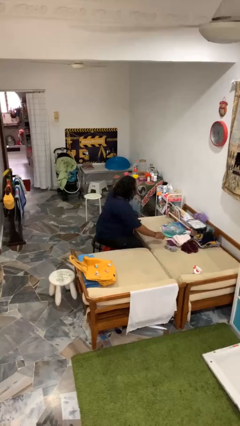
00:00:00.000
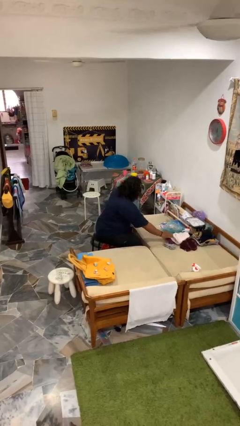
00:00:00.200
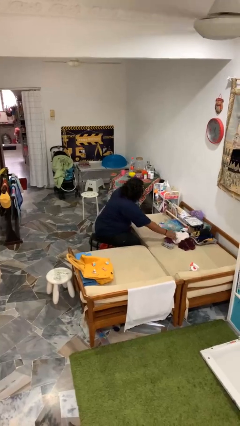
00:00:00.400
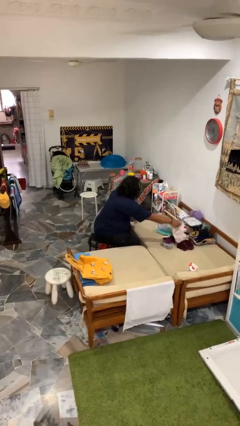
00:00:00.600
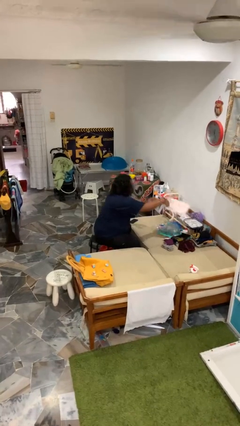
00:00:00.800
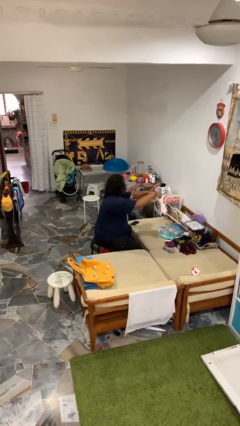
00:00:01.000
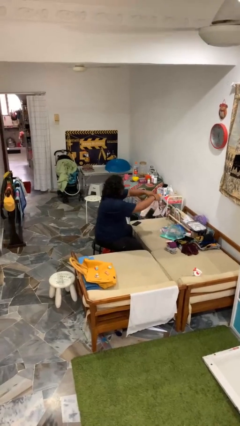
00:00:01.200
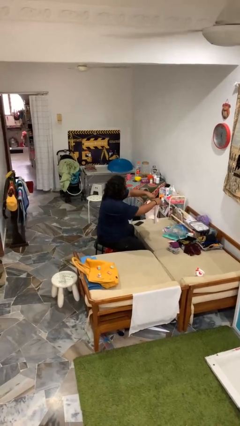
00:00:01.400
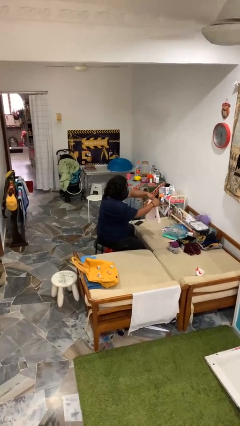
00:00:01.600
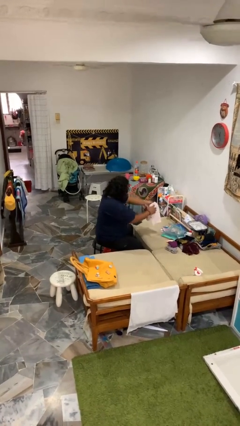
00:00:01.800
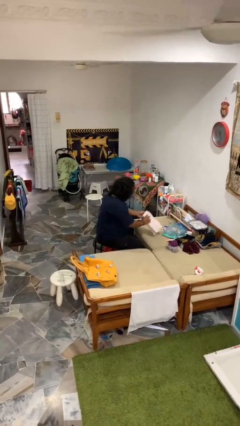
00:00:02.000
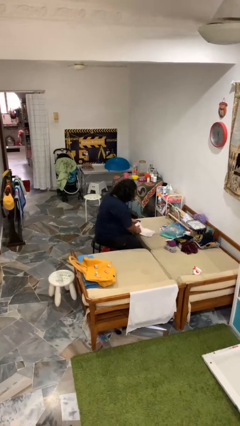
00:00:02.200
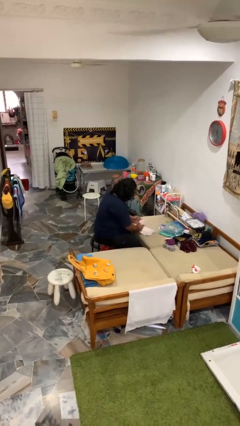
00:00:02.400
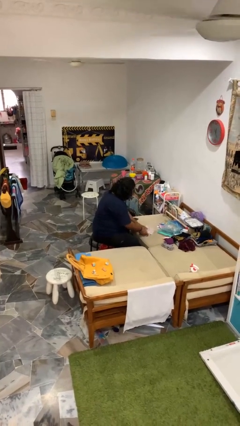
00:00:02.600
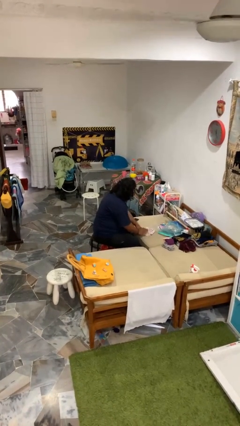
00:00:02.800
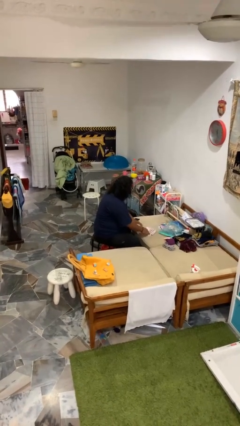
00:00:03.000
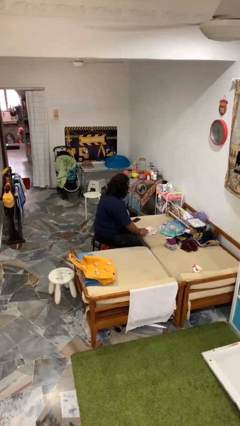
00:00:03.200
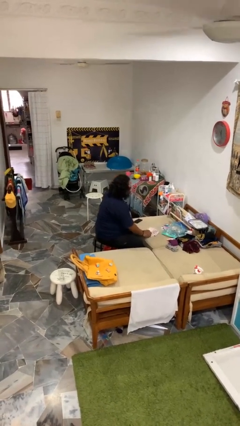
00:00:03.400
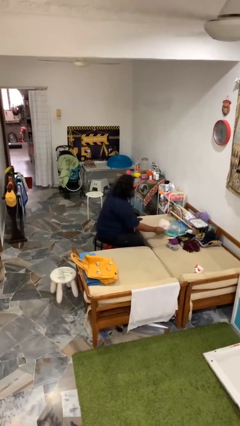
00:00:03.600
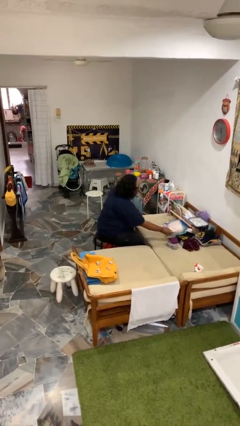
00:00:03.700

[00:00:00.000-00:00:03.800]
person folds pants

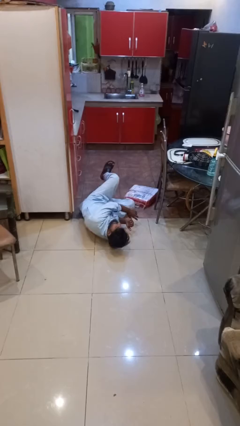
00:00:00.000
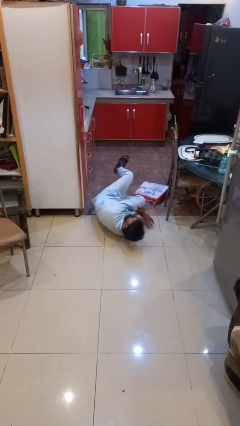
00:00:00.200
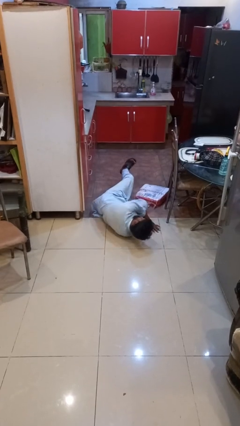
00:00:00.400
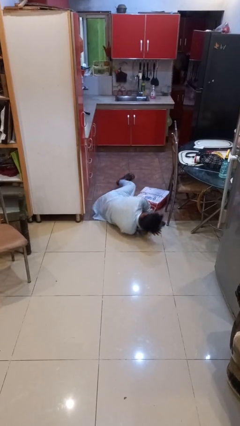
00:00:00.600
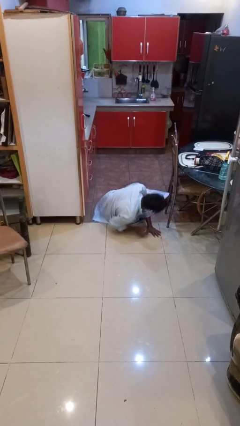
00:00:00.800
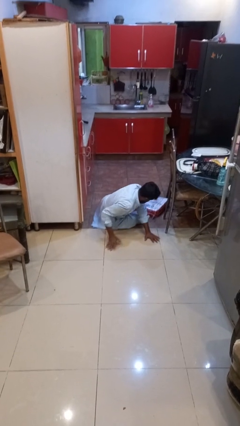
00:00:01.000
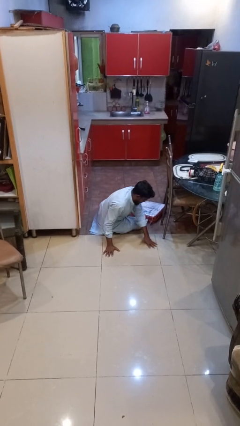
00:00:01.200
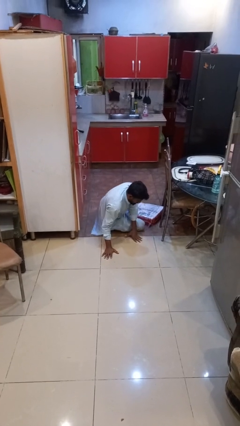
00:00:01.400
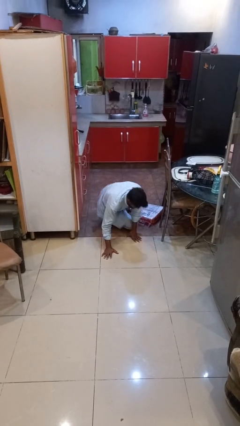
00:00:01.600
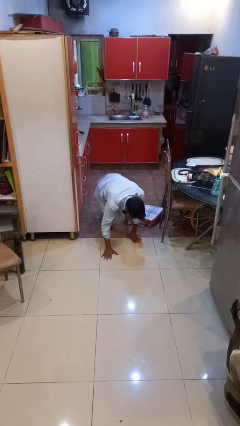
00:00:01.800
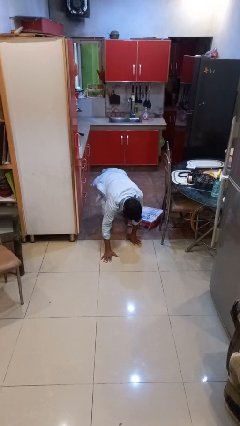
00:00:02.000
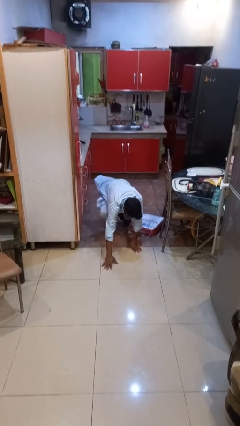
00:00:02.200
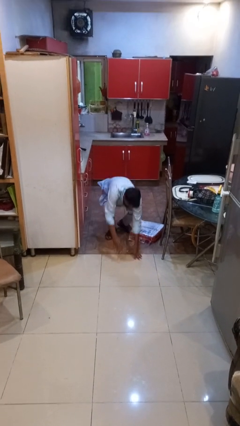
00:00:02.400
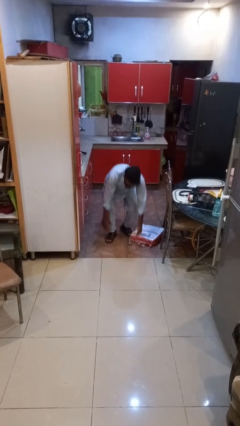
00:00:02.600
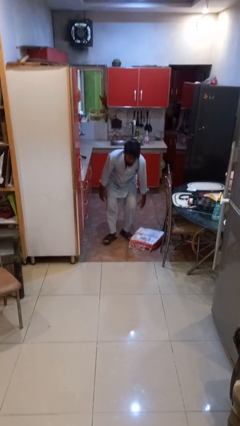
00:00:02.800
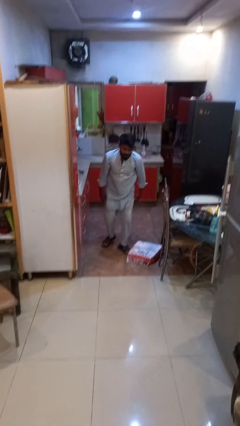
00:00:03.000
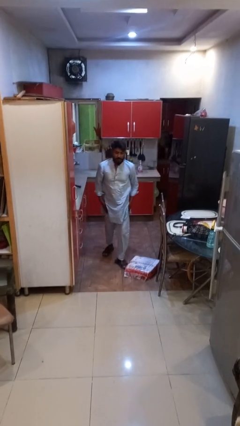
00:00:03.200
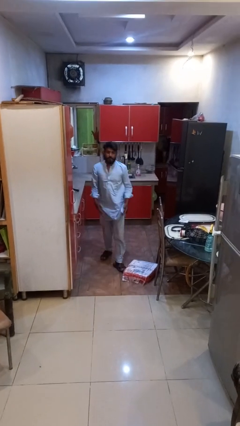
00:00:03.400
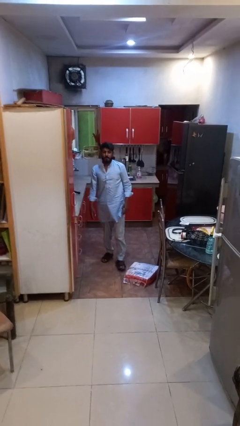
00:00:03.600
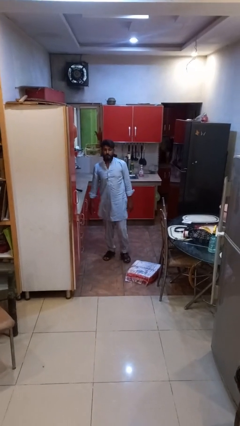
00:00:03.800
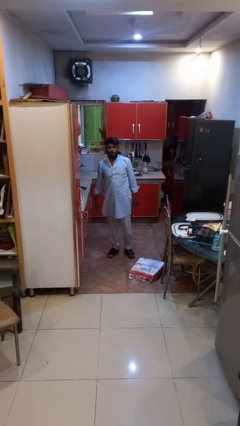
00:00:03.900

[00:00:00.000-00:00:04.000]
person stands up from floor

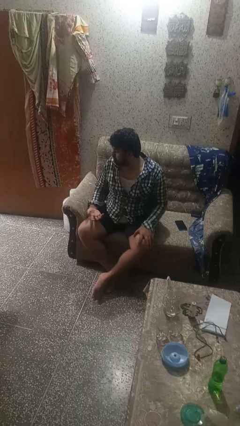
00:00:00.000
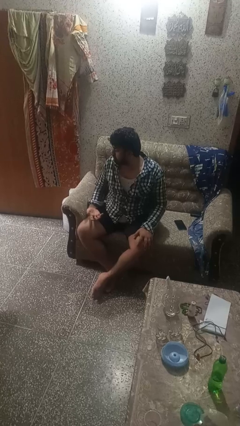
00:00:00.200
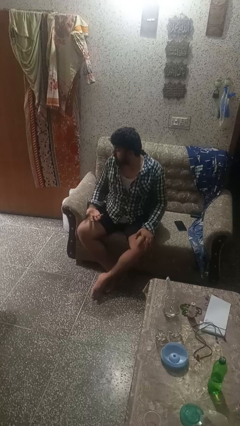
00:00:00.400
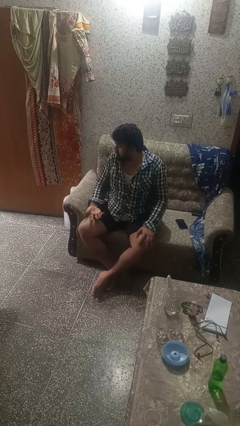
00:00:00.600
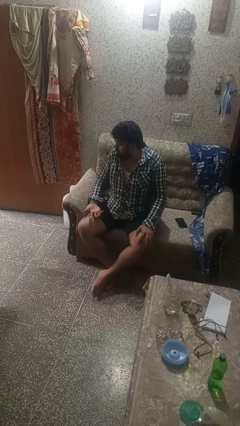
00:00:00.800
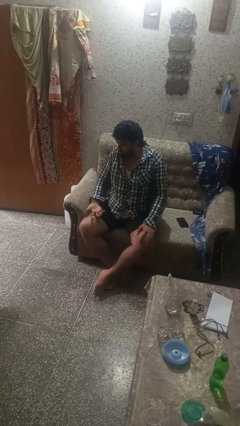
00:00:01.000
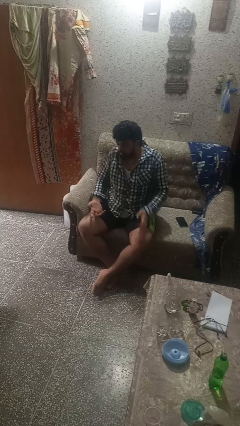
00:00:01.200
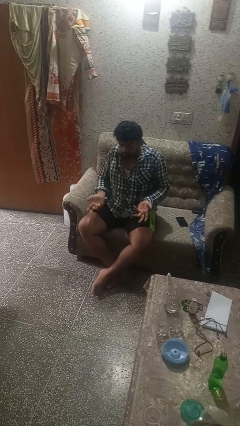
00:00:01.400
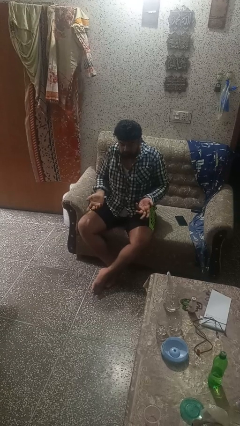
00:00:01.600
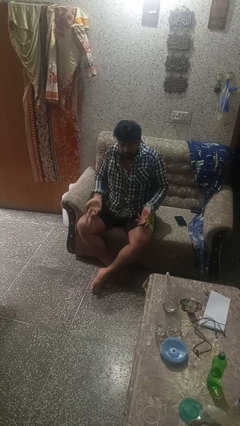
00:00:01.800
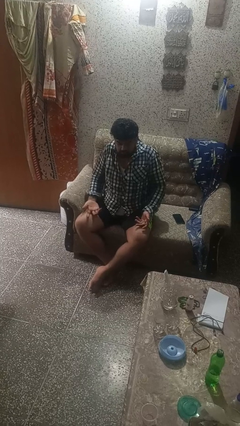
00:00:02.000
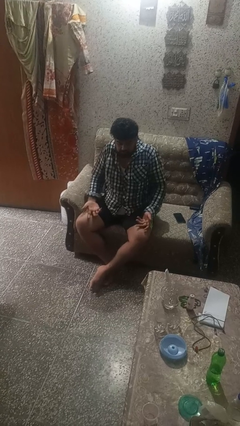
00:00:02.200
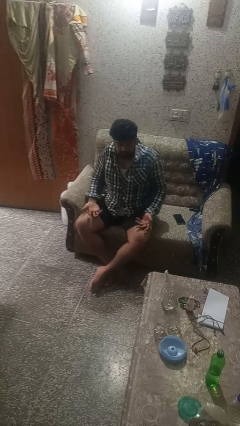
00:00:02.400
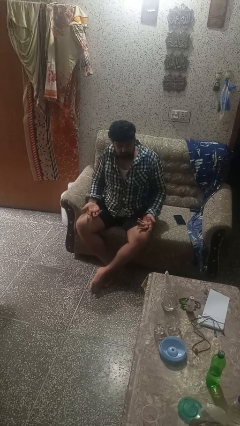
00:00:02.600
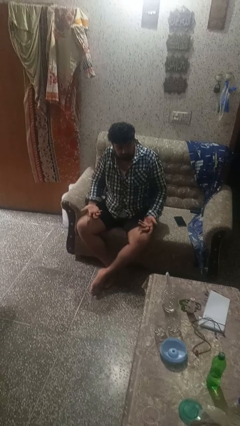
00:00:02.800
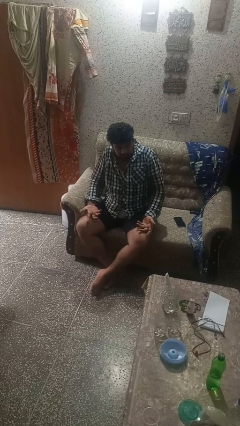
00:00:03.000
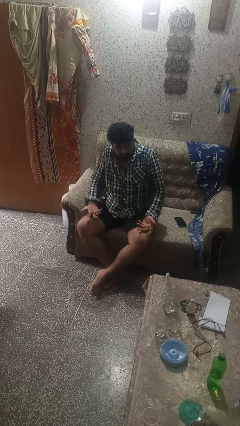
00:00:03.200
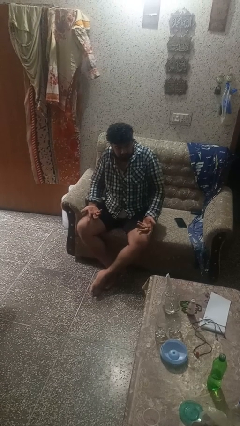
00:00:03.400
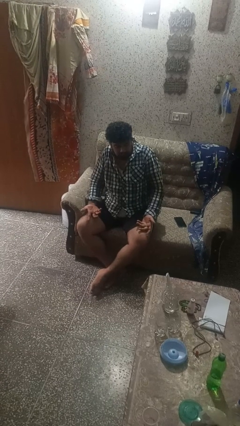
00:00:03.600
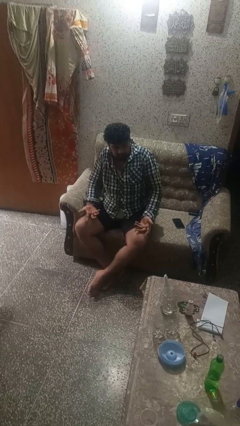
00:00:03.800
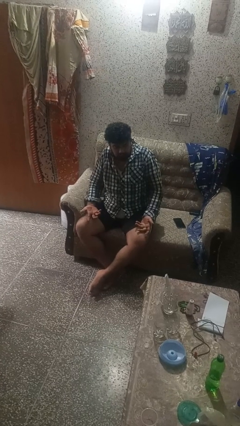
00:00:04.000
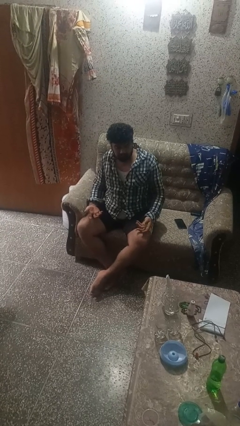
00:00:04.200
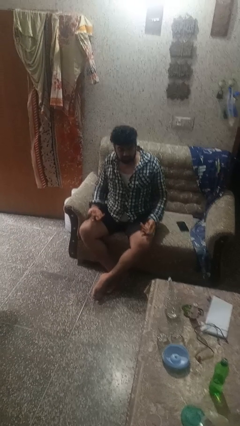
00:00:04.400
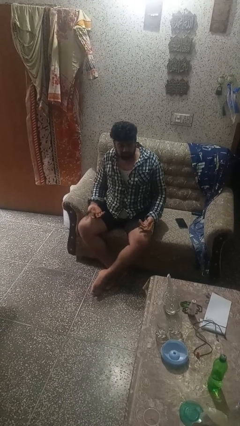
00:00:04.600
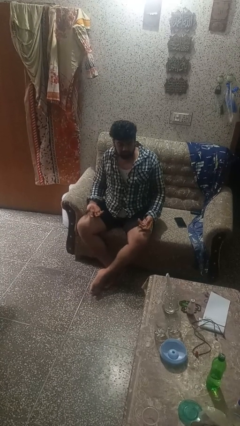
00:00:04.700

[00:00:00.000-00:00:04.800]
person shrugs

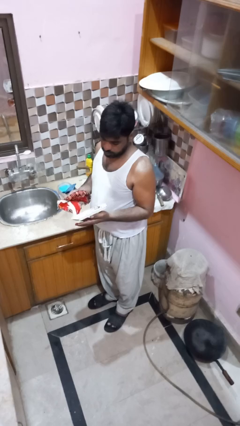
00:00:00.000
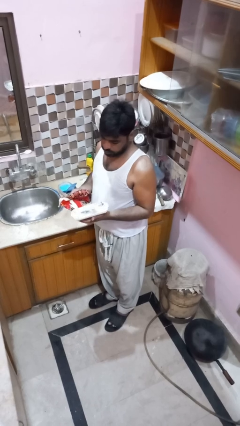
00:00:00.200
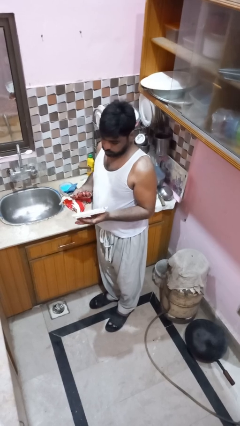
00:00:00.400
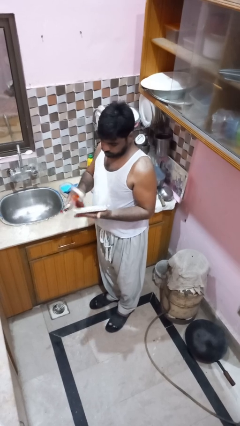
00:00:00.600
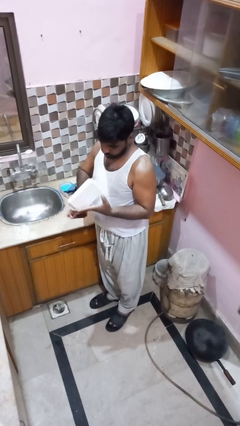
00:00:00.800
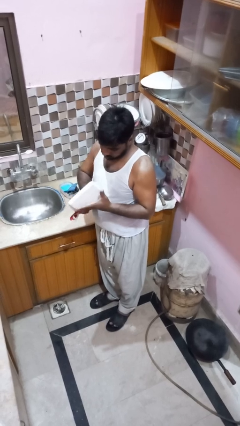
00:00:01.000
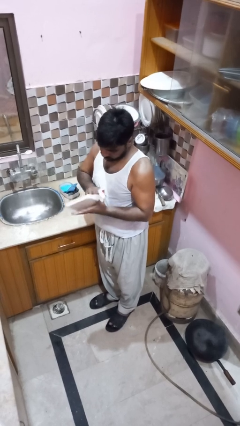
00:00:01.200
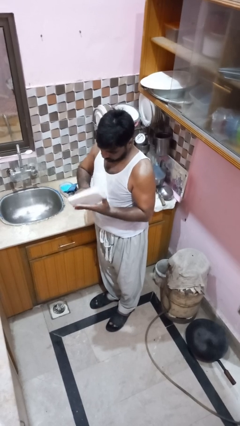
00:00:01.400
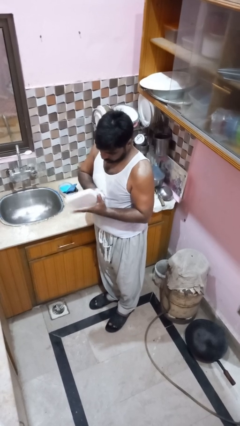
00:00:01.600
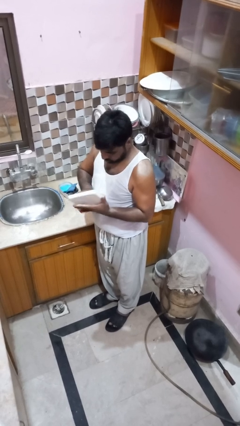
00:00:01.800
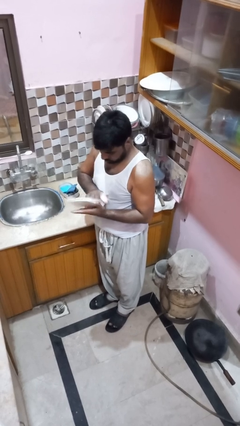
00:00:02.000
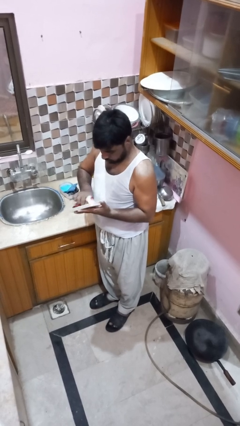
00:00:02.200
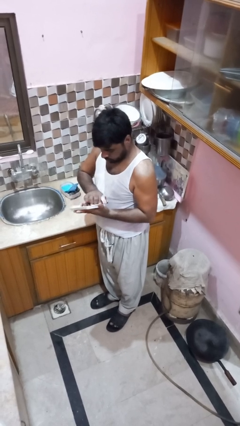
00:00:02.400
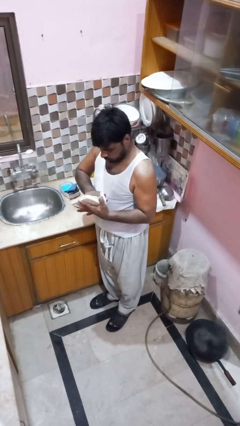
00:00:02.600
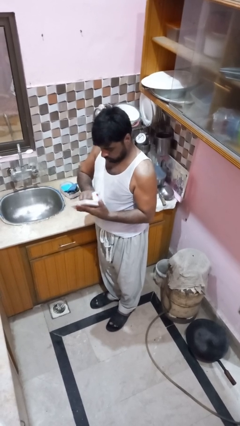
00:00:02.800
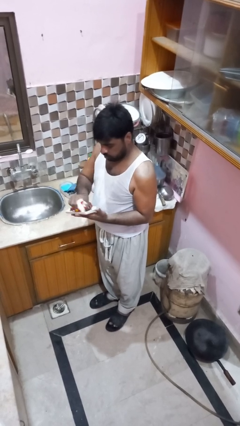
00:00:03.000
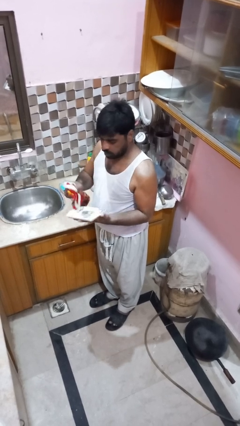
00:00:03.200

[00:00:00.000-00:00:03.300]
person dries dish

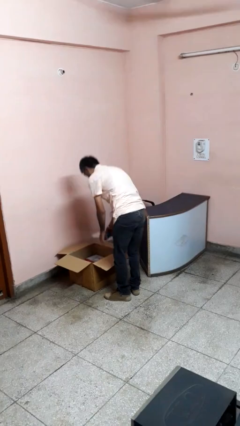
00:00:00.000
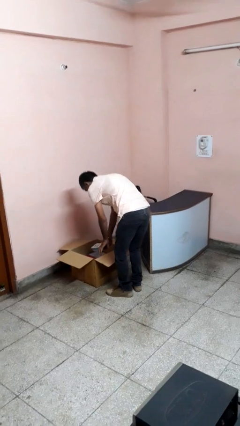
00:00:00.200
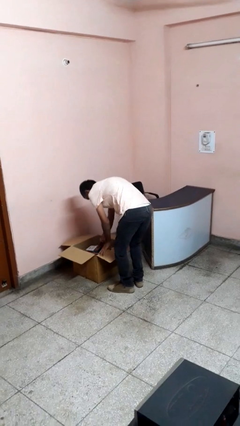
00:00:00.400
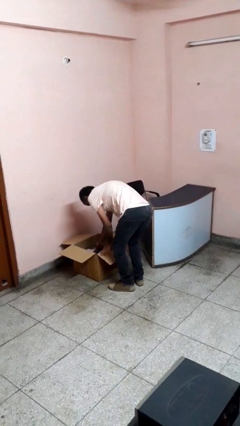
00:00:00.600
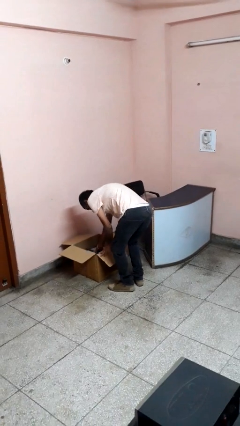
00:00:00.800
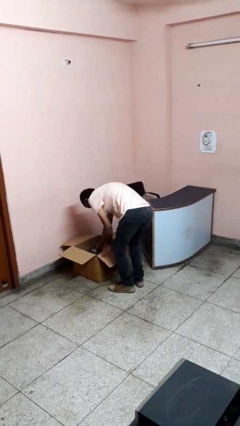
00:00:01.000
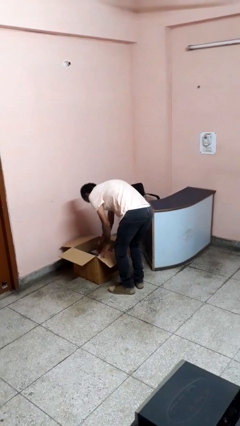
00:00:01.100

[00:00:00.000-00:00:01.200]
person puts object into box

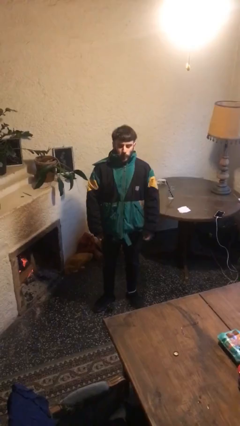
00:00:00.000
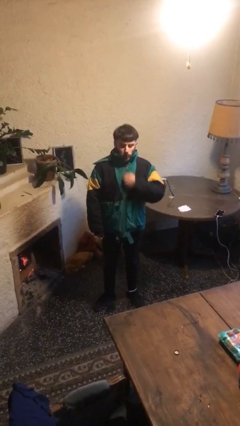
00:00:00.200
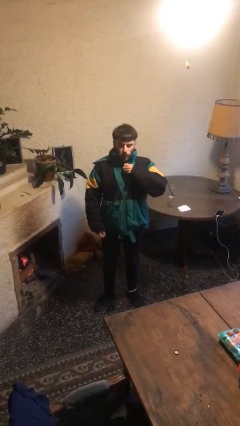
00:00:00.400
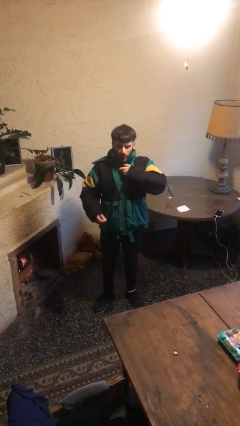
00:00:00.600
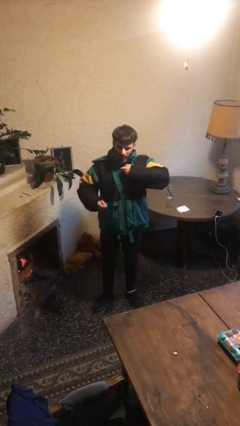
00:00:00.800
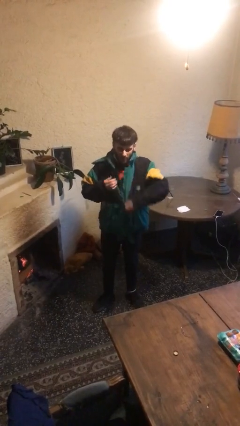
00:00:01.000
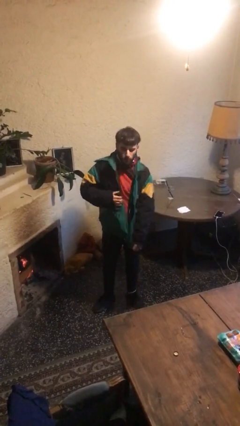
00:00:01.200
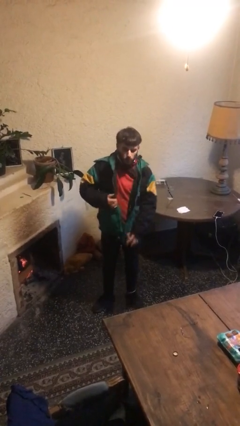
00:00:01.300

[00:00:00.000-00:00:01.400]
person unzips jacket
